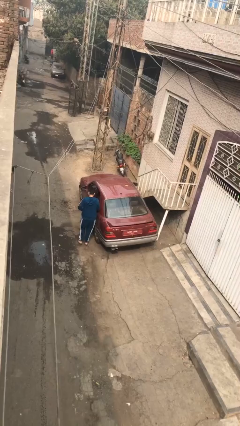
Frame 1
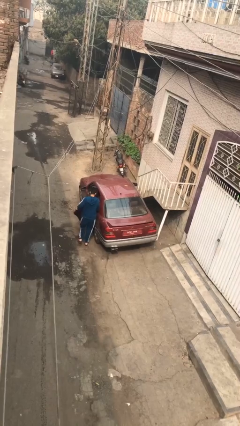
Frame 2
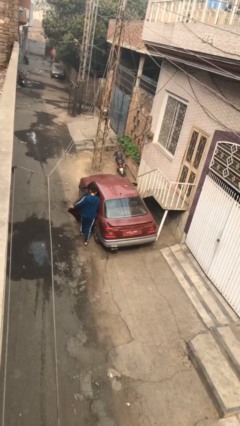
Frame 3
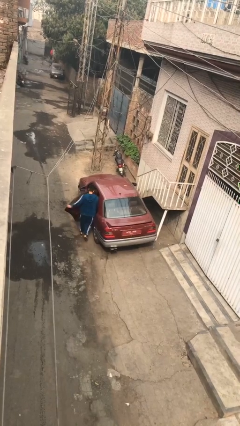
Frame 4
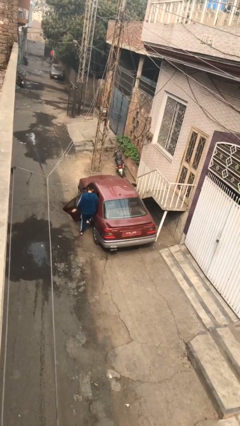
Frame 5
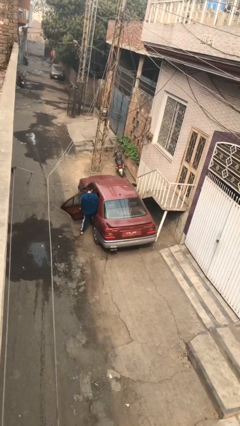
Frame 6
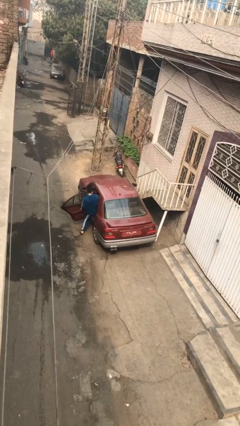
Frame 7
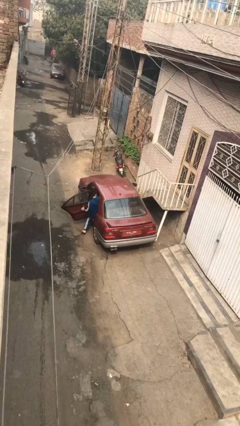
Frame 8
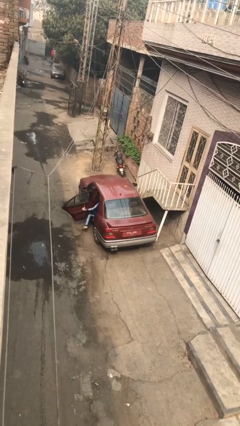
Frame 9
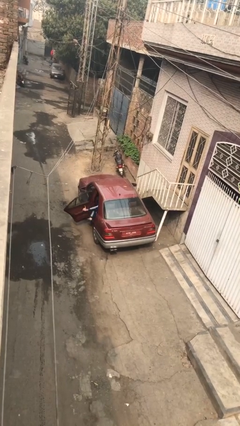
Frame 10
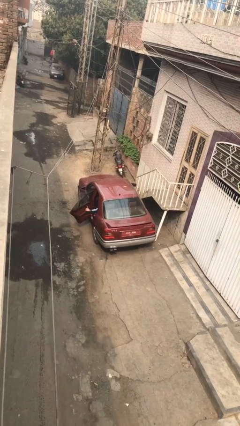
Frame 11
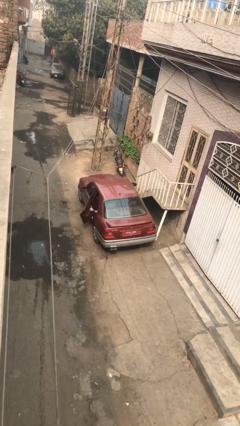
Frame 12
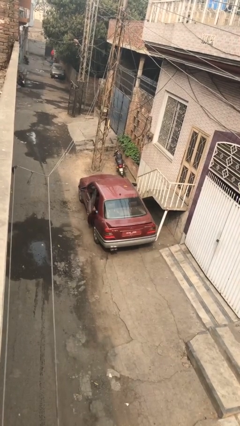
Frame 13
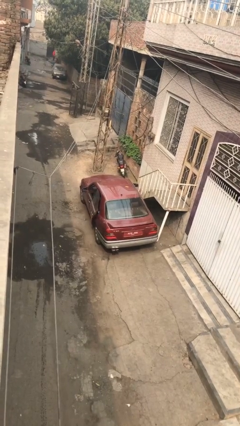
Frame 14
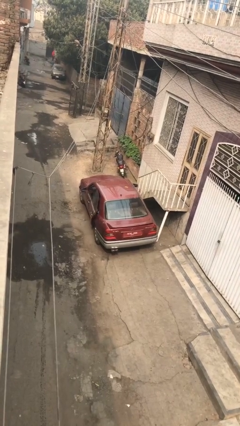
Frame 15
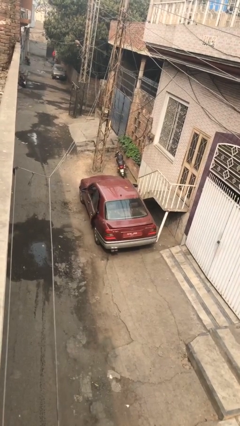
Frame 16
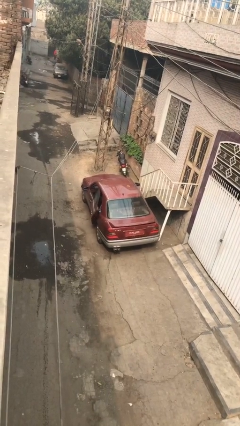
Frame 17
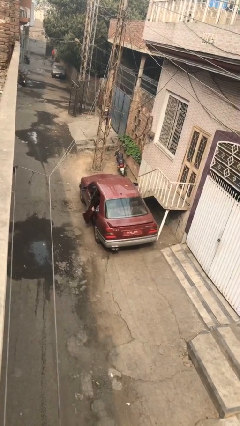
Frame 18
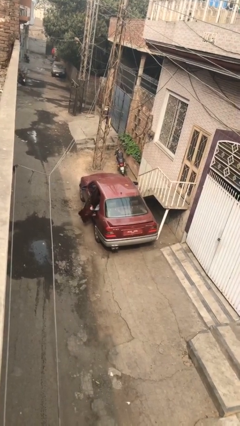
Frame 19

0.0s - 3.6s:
car picks up person

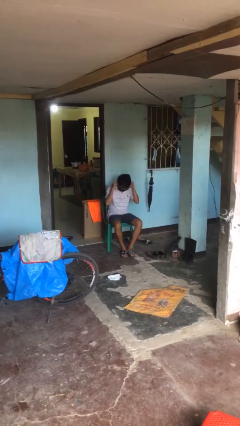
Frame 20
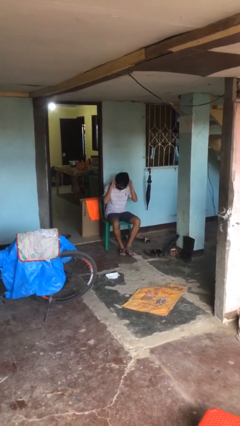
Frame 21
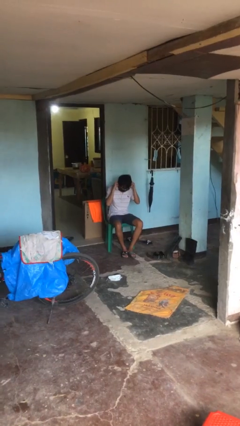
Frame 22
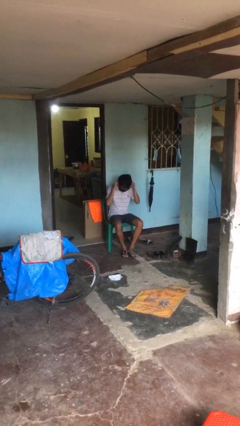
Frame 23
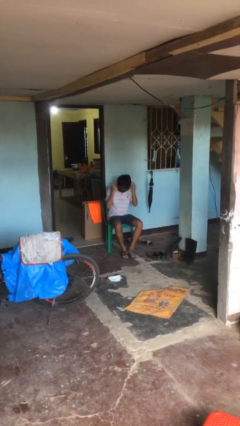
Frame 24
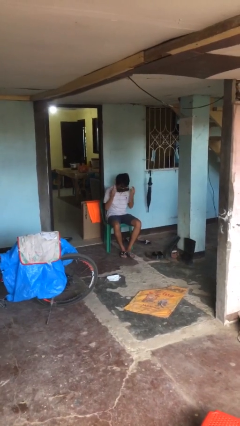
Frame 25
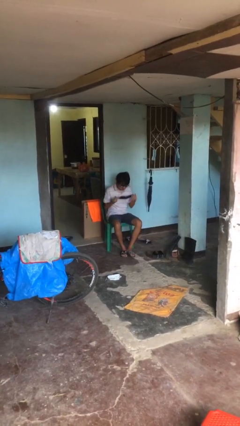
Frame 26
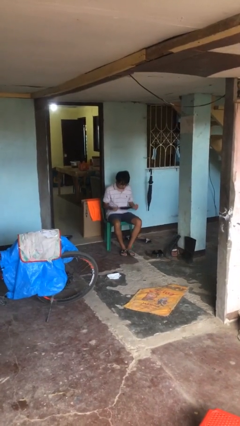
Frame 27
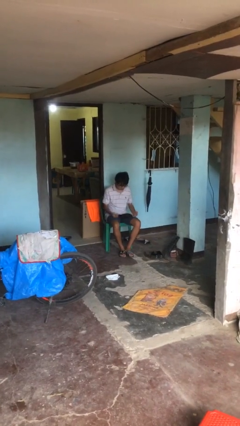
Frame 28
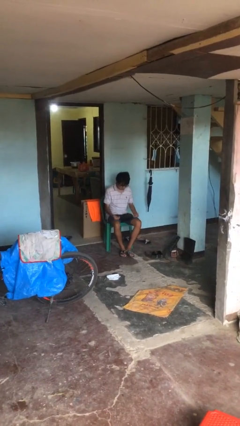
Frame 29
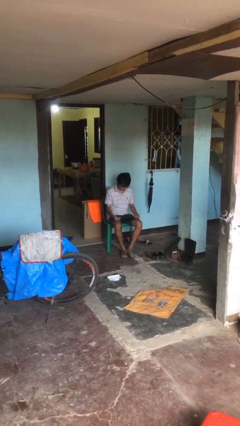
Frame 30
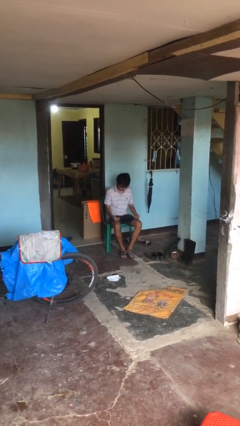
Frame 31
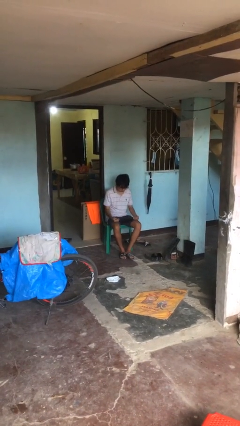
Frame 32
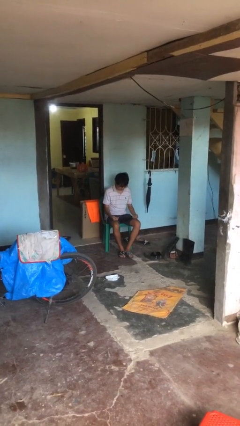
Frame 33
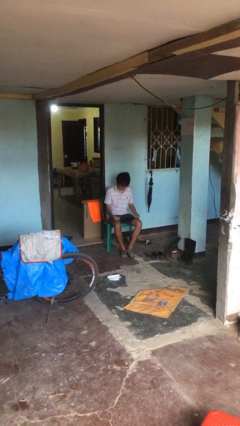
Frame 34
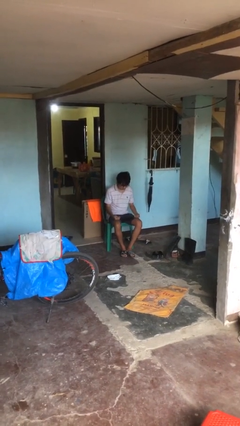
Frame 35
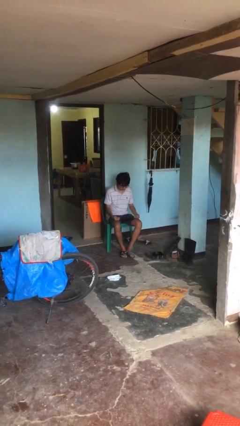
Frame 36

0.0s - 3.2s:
person takes off facemask

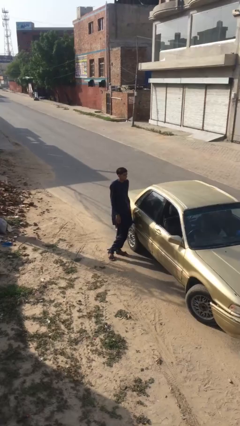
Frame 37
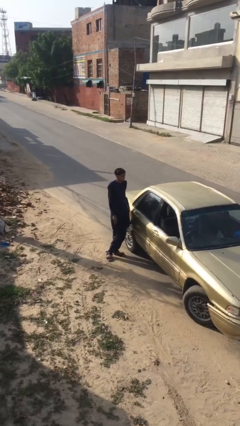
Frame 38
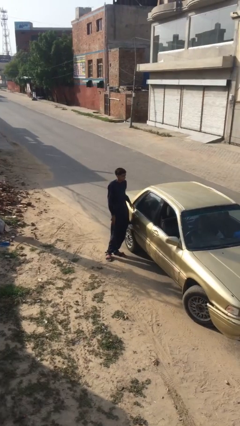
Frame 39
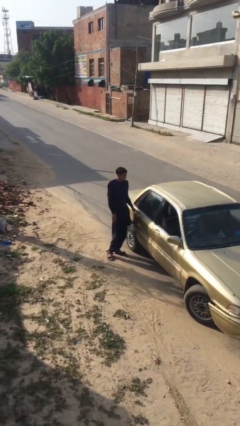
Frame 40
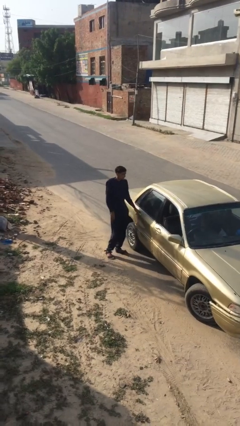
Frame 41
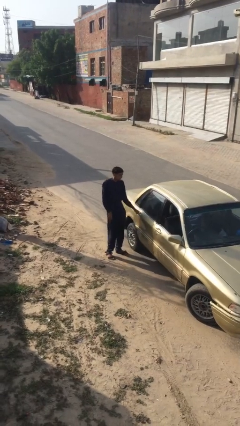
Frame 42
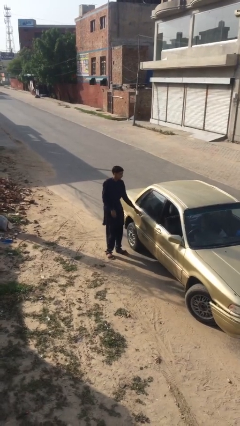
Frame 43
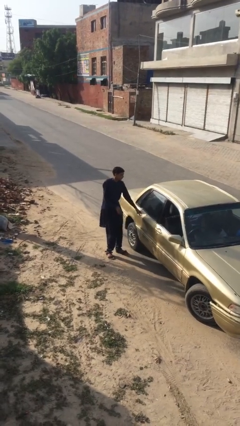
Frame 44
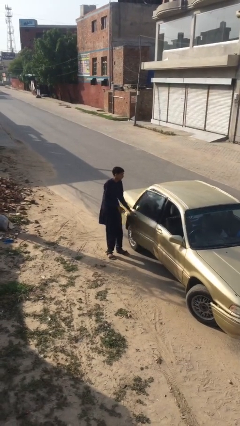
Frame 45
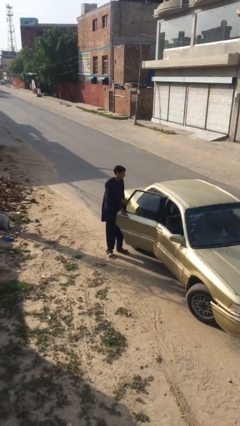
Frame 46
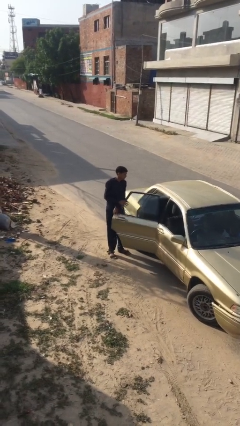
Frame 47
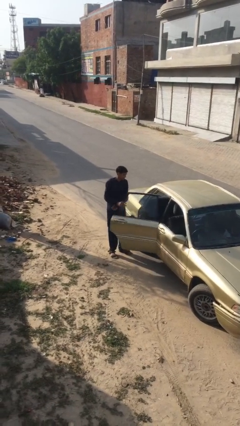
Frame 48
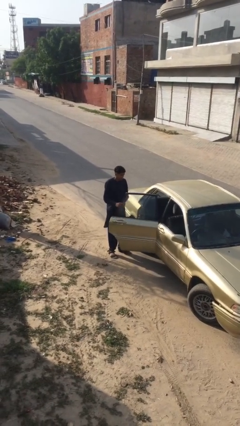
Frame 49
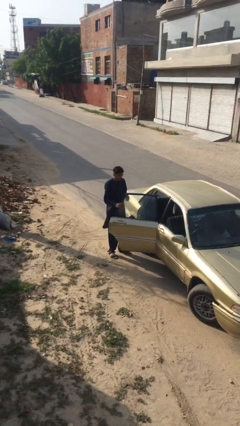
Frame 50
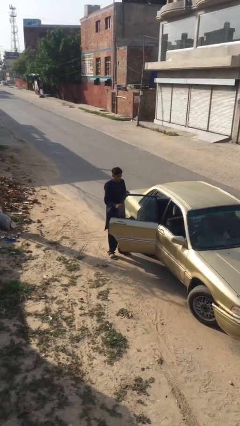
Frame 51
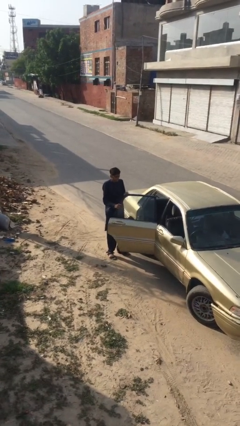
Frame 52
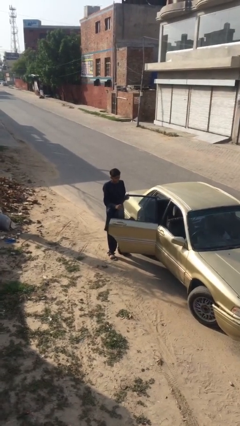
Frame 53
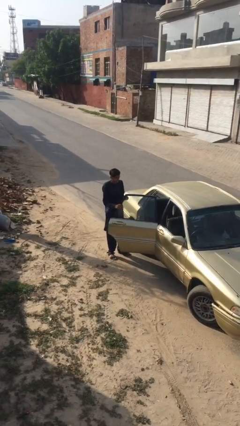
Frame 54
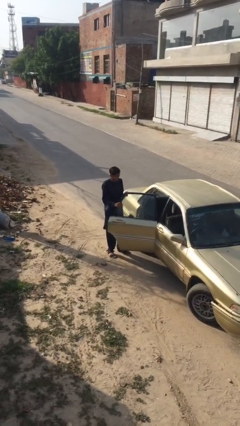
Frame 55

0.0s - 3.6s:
person opens car door

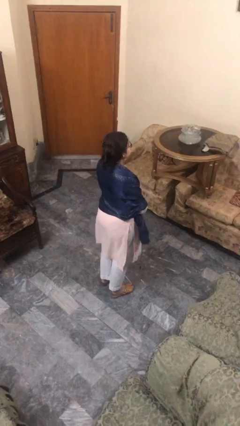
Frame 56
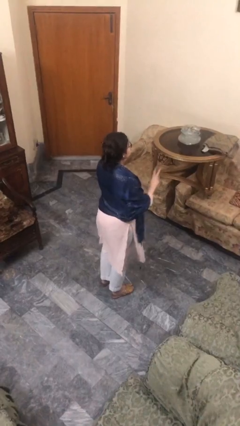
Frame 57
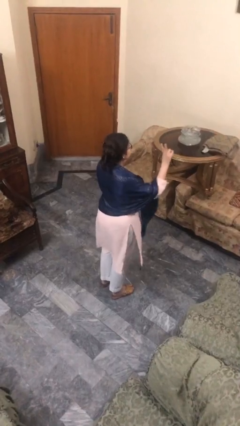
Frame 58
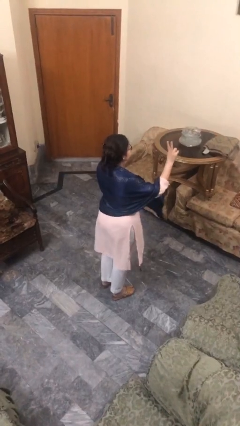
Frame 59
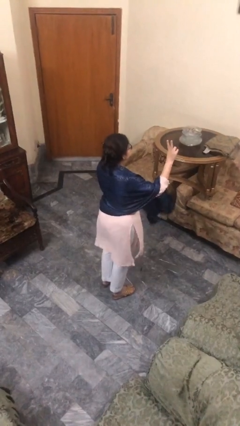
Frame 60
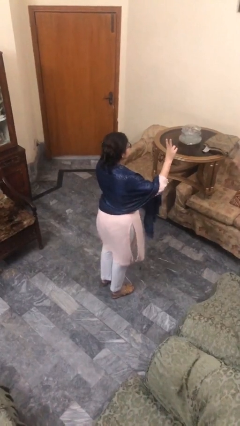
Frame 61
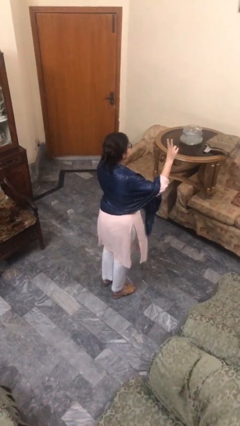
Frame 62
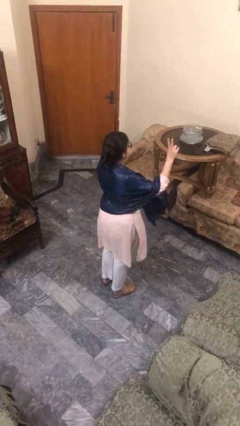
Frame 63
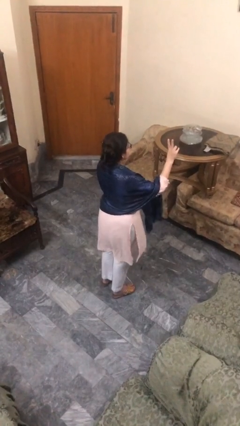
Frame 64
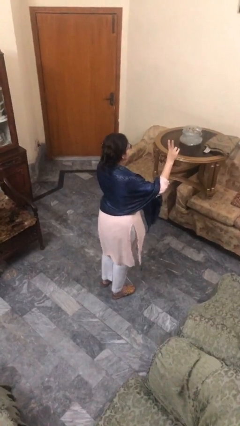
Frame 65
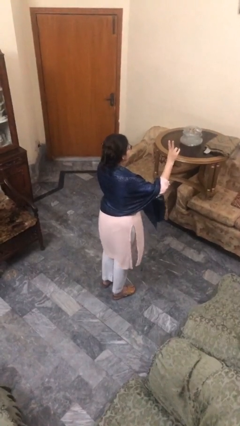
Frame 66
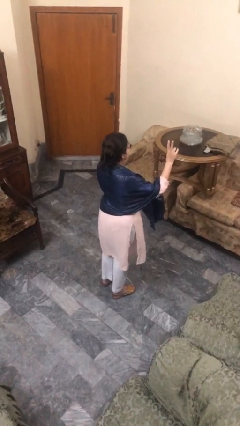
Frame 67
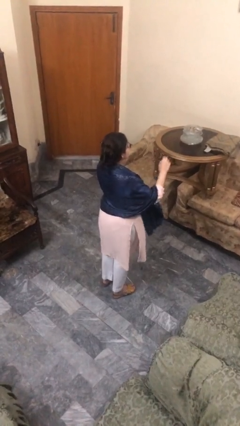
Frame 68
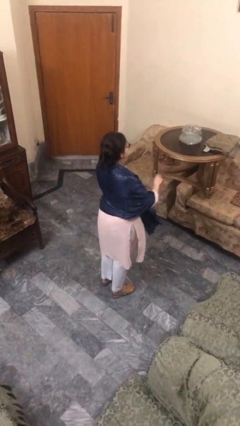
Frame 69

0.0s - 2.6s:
person gestures peace

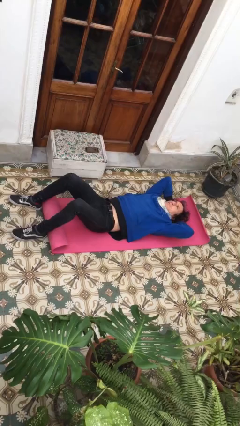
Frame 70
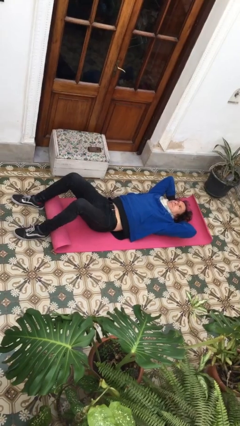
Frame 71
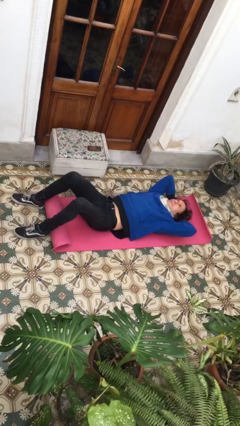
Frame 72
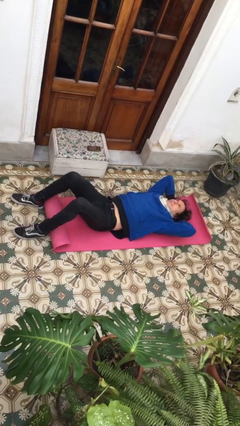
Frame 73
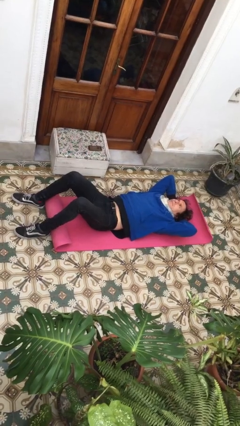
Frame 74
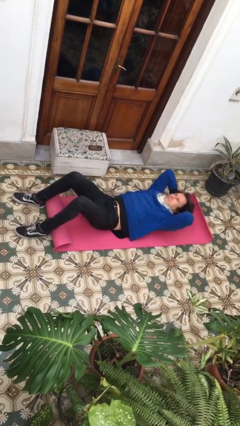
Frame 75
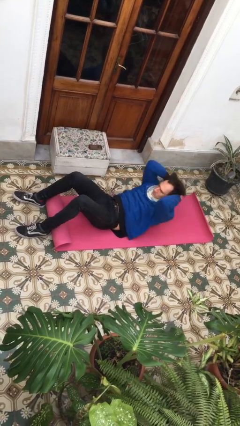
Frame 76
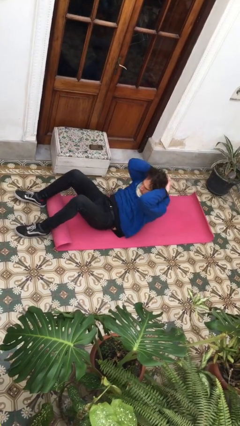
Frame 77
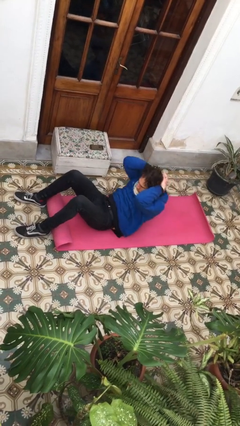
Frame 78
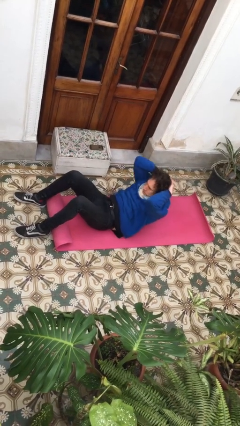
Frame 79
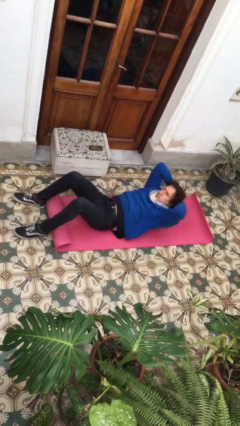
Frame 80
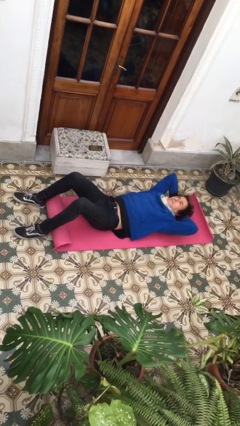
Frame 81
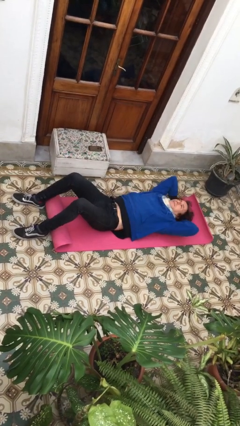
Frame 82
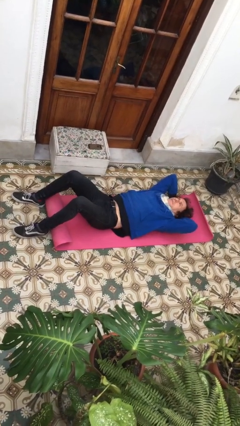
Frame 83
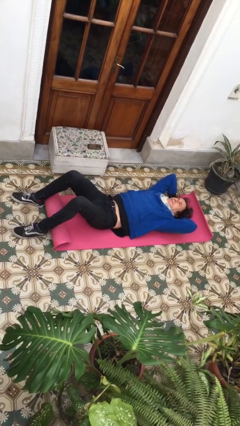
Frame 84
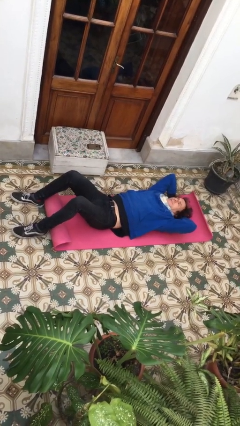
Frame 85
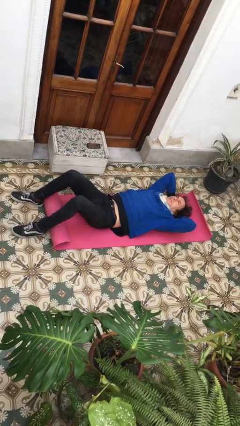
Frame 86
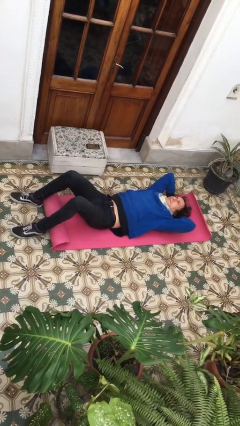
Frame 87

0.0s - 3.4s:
person exercises with situp

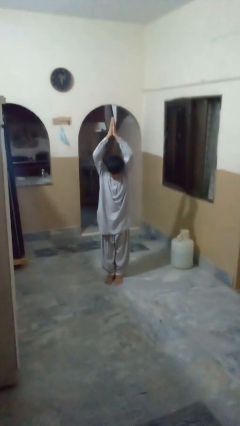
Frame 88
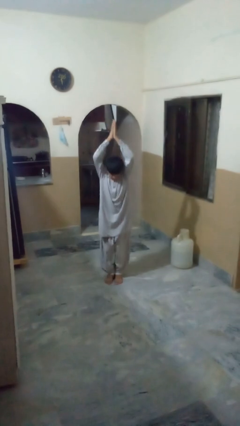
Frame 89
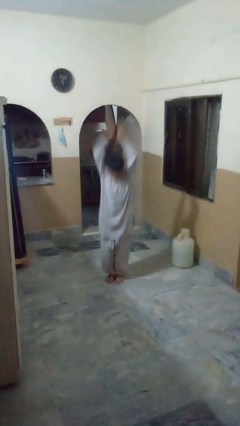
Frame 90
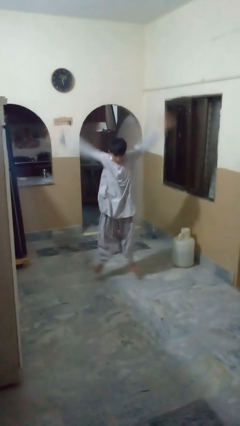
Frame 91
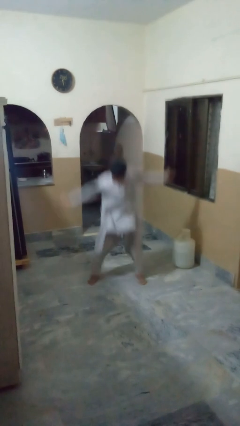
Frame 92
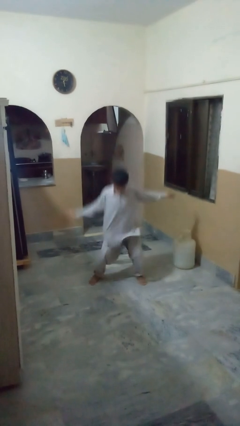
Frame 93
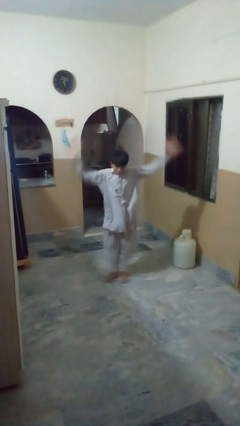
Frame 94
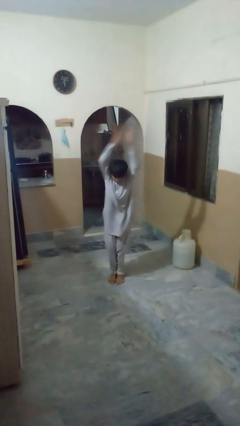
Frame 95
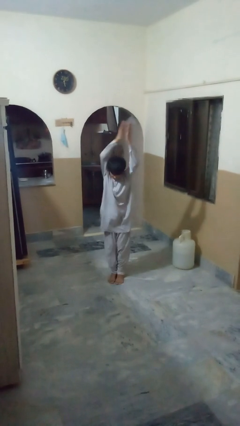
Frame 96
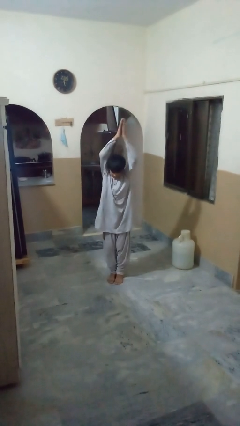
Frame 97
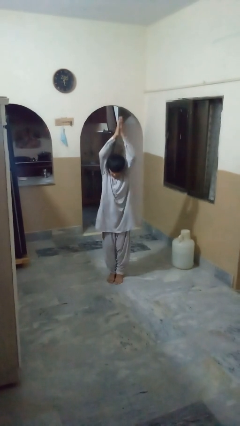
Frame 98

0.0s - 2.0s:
person exercises with jumping jacks
